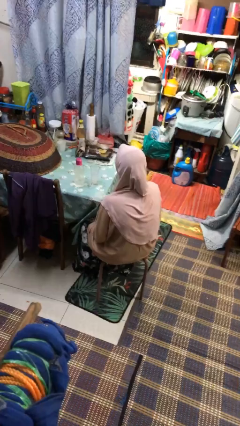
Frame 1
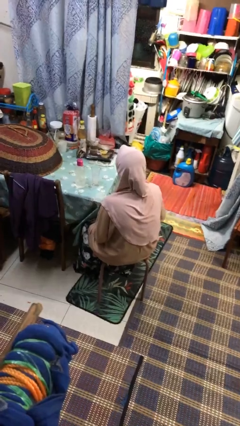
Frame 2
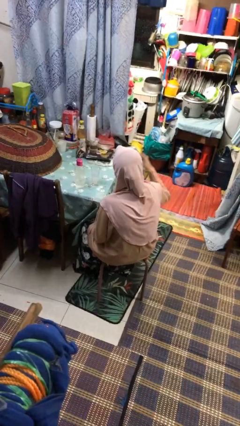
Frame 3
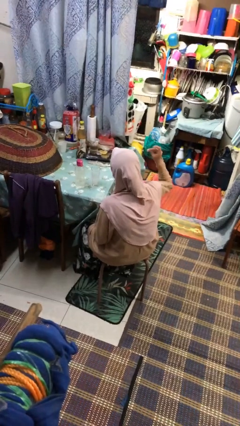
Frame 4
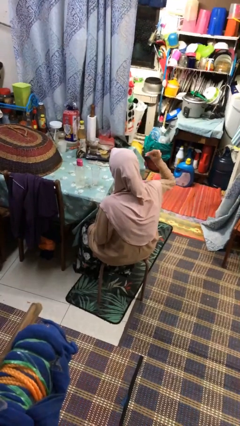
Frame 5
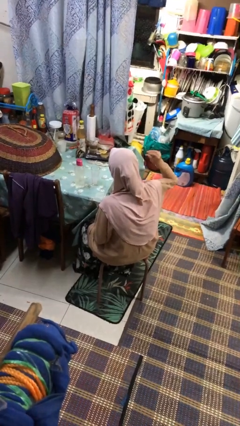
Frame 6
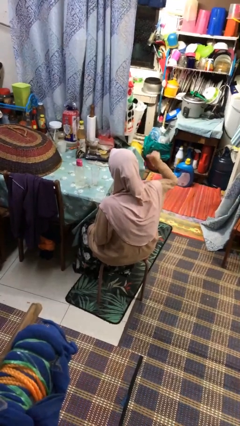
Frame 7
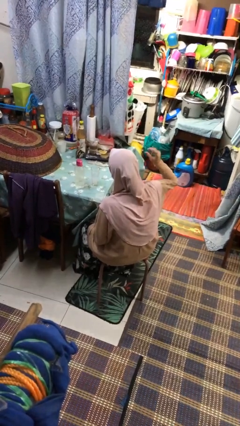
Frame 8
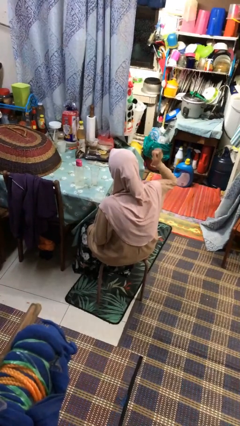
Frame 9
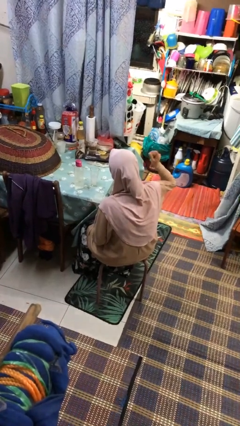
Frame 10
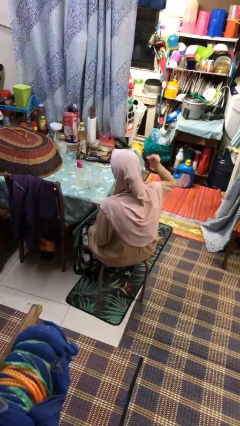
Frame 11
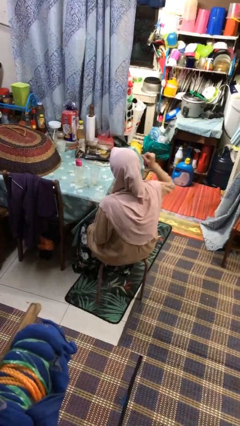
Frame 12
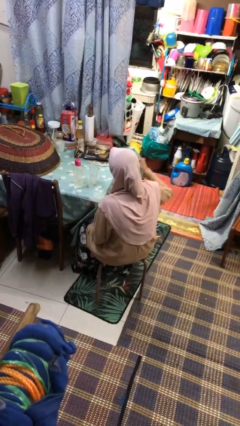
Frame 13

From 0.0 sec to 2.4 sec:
person snaps fingers

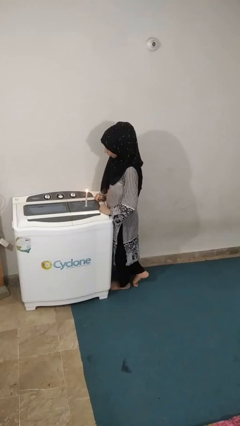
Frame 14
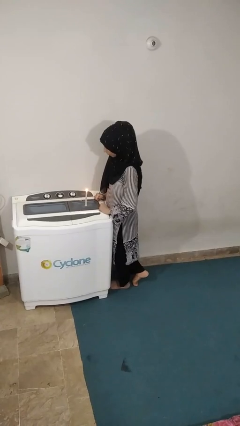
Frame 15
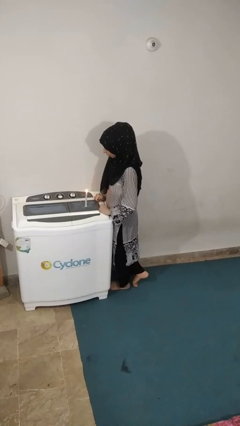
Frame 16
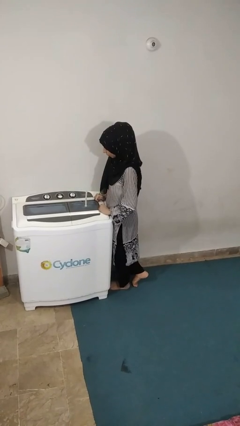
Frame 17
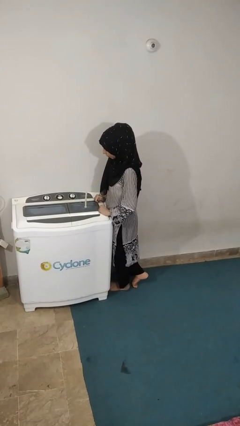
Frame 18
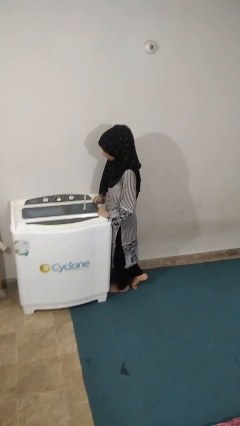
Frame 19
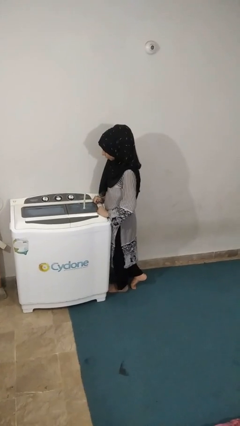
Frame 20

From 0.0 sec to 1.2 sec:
person extinguishes candle

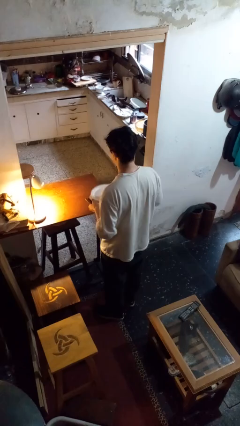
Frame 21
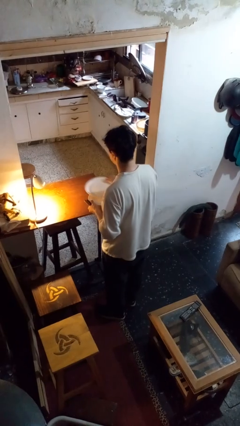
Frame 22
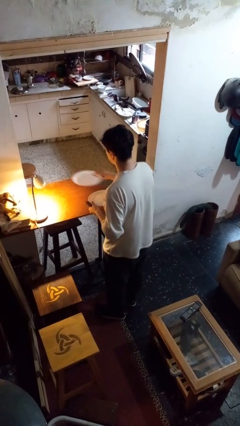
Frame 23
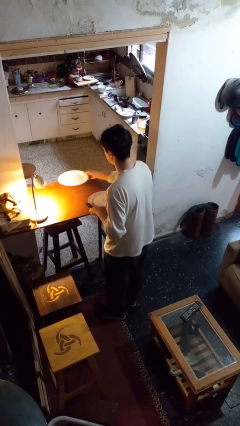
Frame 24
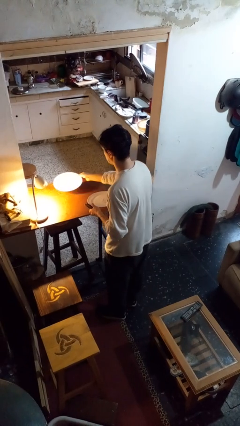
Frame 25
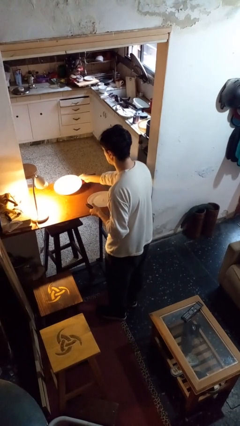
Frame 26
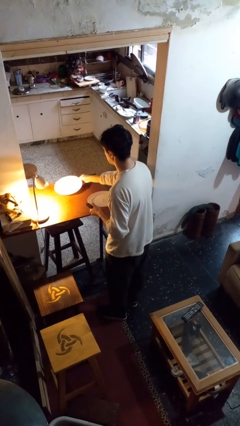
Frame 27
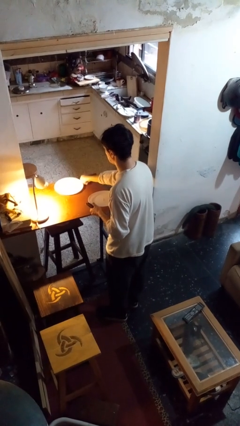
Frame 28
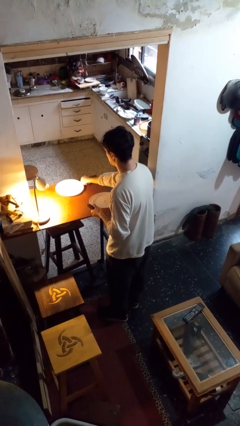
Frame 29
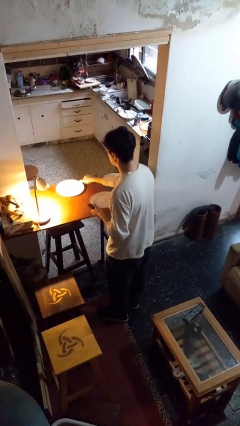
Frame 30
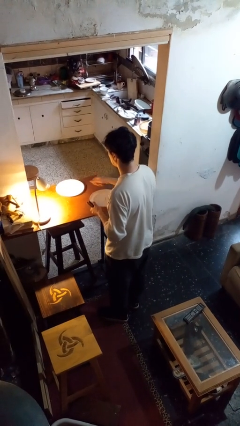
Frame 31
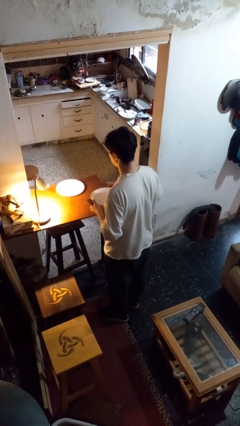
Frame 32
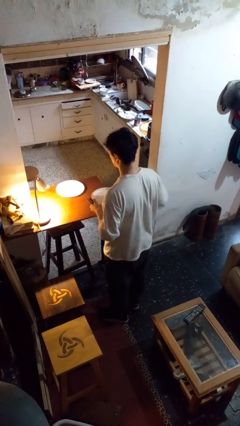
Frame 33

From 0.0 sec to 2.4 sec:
person sets table

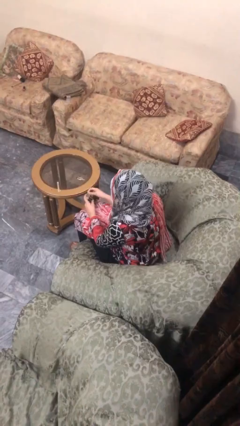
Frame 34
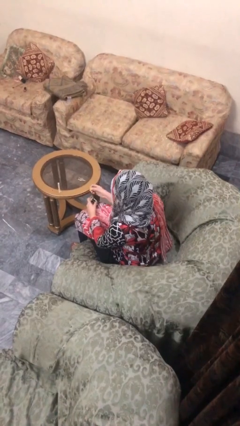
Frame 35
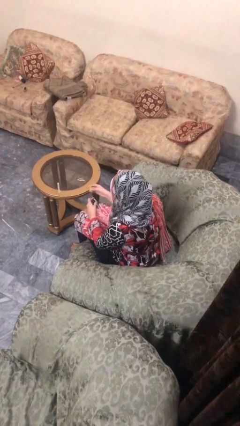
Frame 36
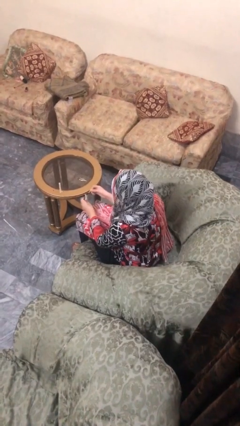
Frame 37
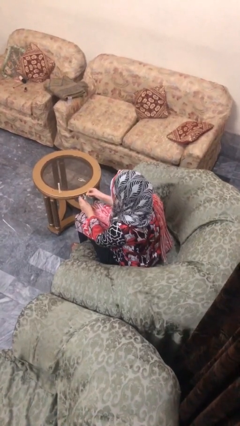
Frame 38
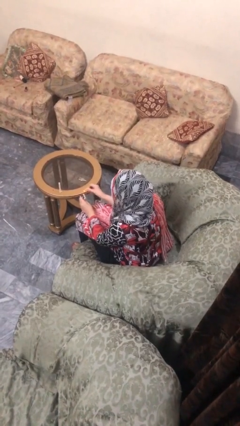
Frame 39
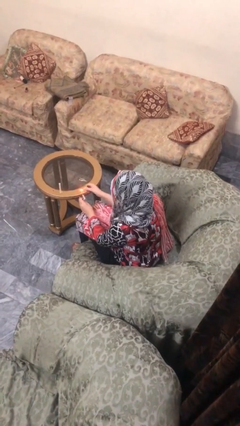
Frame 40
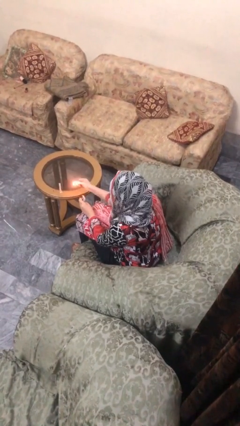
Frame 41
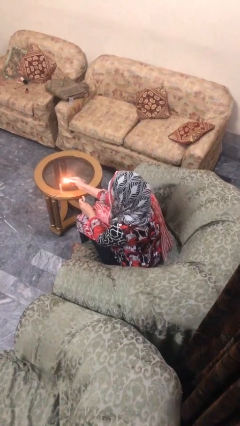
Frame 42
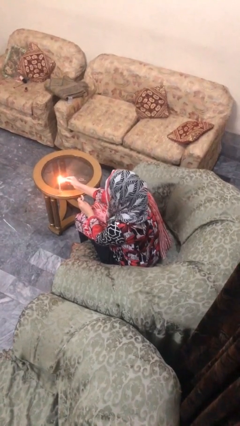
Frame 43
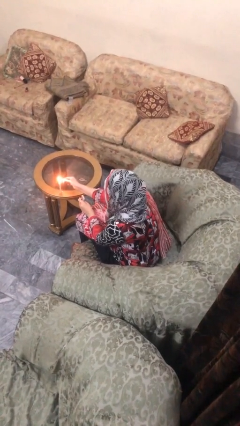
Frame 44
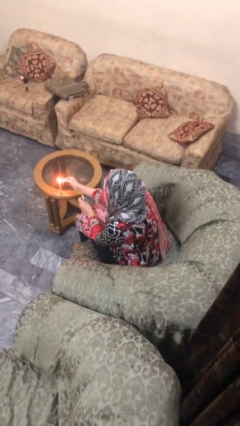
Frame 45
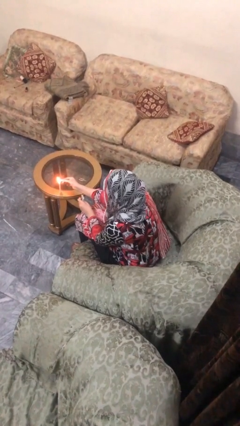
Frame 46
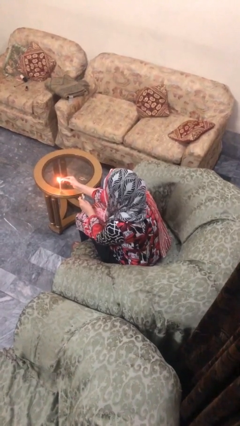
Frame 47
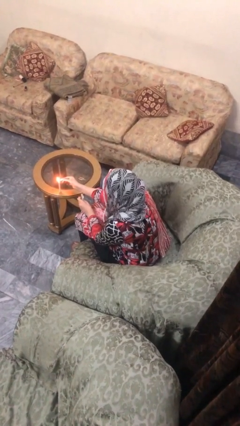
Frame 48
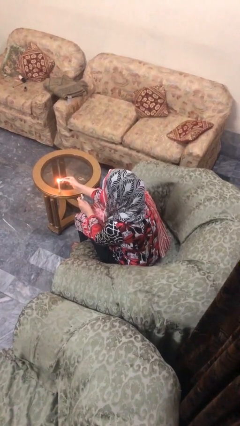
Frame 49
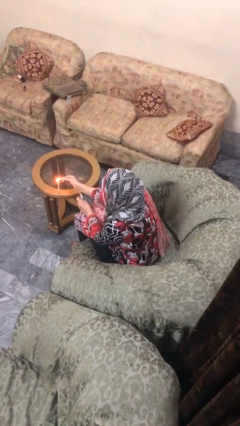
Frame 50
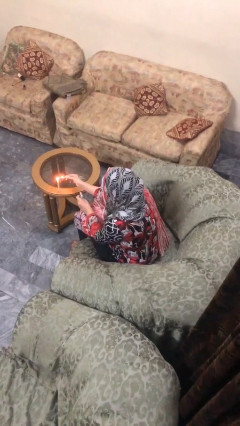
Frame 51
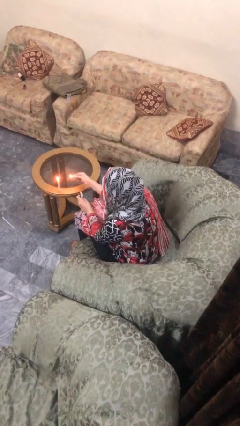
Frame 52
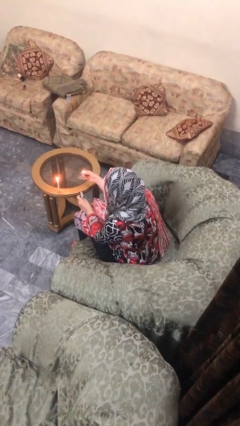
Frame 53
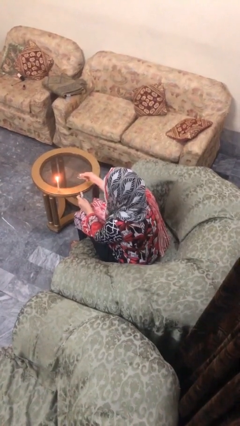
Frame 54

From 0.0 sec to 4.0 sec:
person lights candle

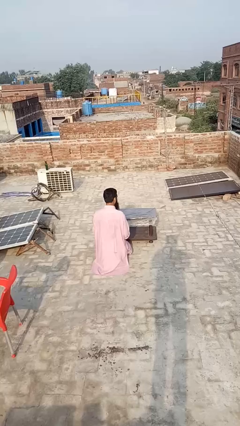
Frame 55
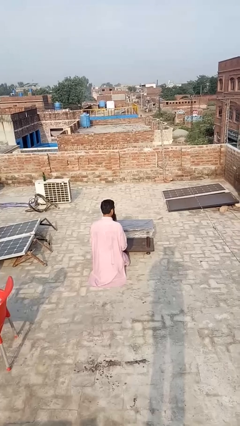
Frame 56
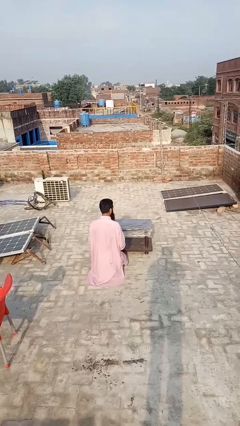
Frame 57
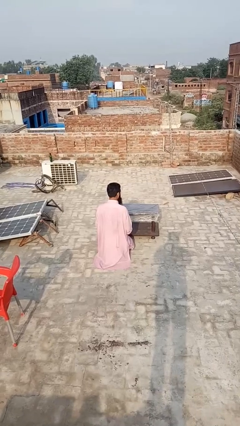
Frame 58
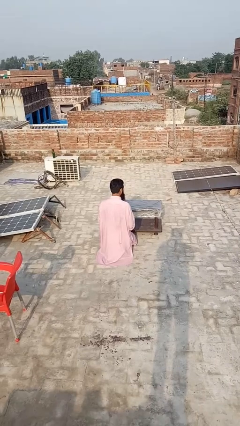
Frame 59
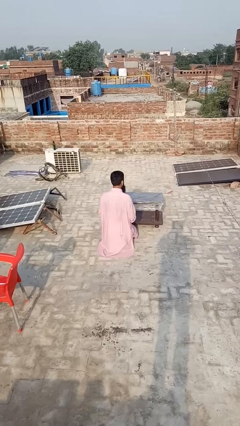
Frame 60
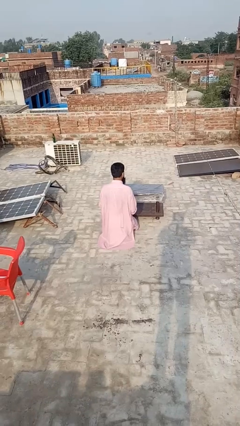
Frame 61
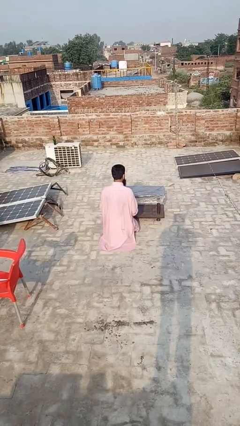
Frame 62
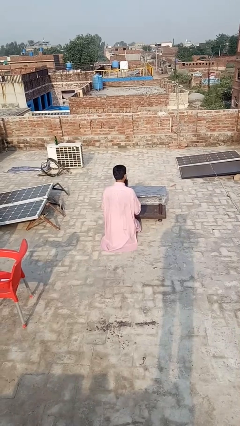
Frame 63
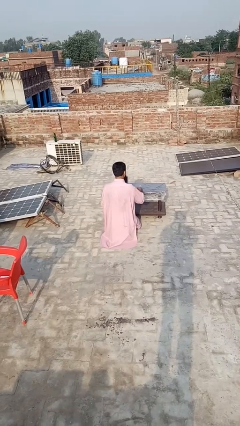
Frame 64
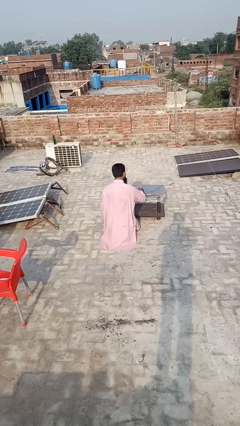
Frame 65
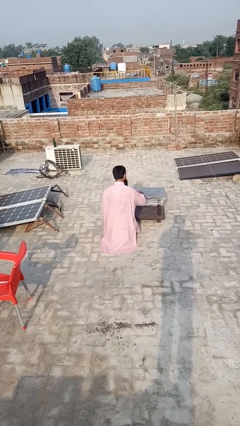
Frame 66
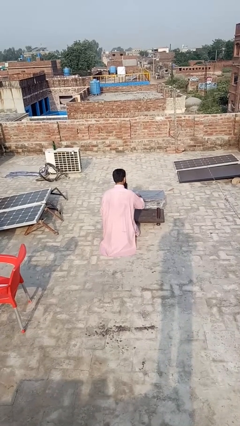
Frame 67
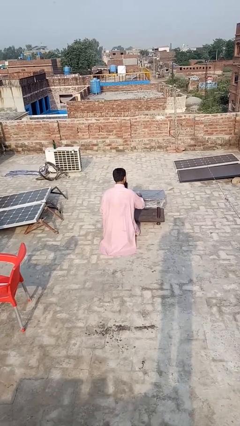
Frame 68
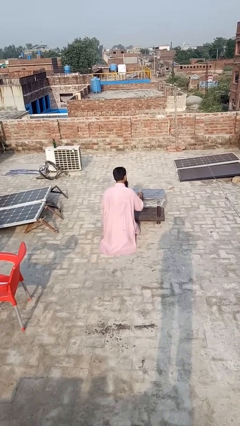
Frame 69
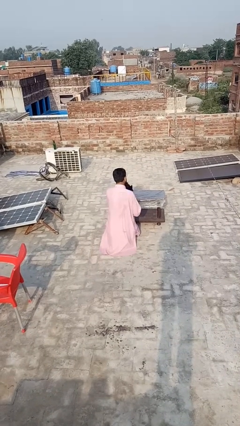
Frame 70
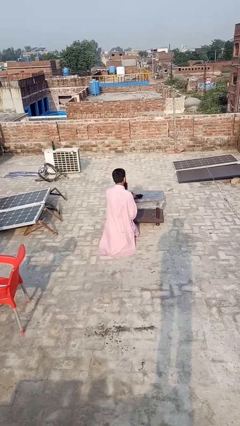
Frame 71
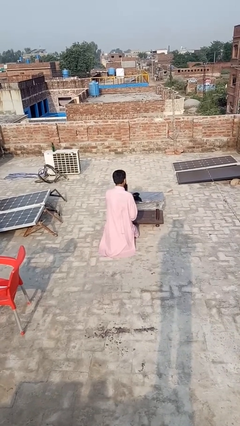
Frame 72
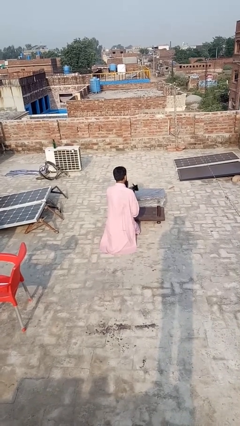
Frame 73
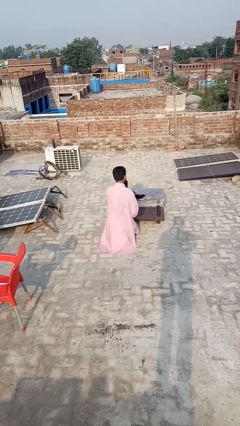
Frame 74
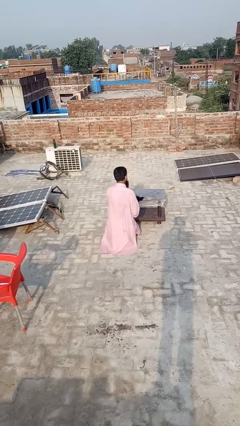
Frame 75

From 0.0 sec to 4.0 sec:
person sprays from bottle

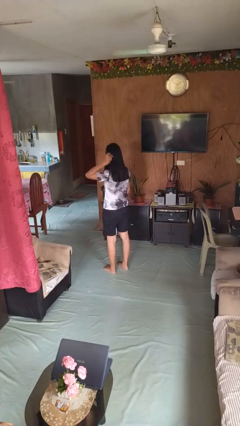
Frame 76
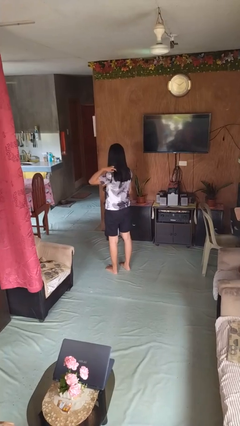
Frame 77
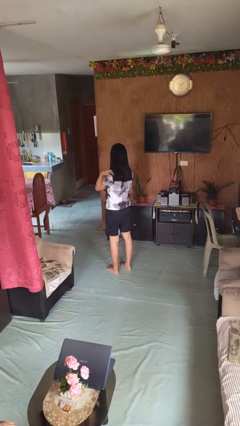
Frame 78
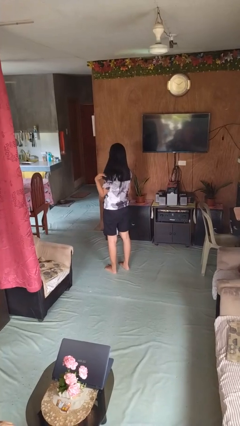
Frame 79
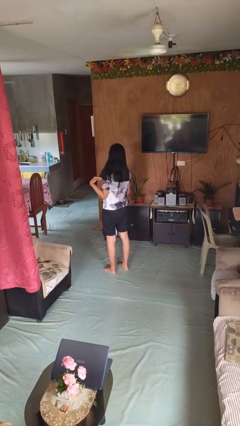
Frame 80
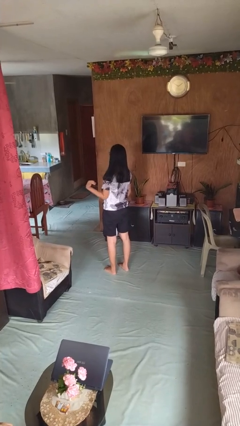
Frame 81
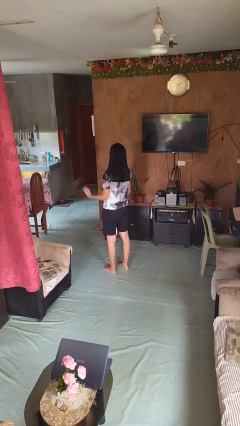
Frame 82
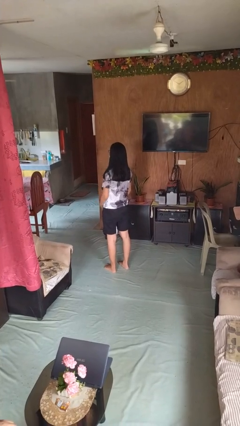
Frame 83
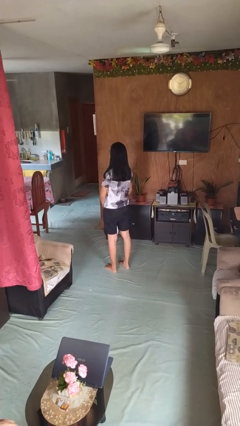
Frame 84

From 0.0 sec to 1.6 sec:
person strokes hair

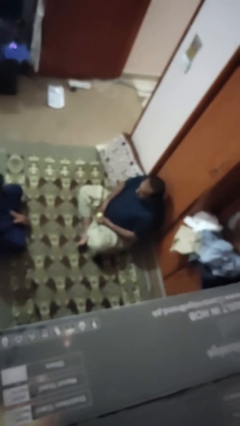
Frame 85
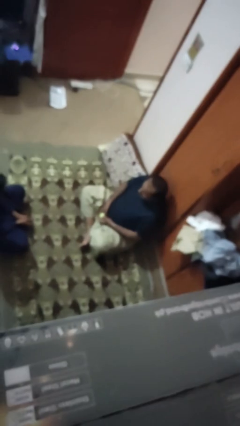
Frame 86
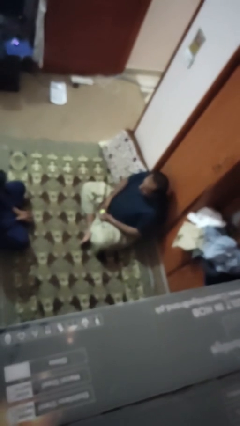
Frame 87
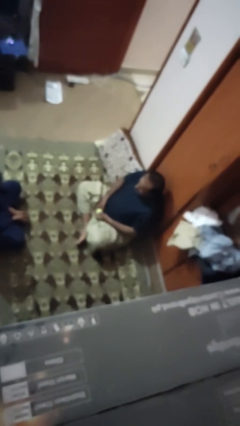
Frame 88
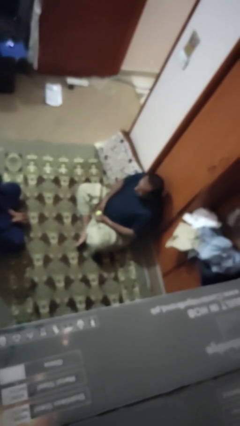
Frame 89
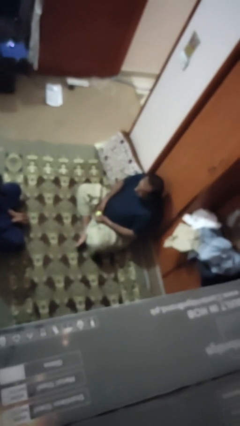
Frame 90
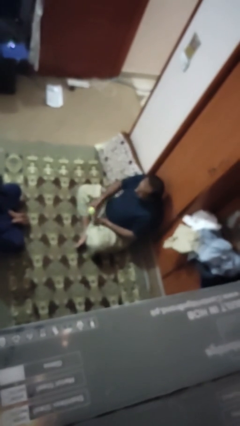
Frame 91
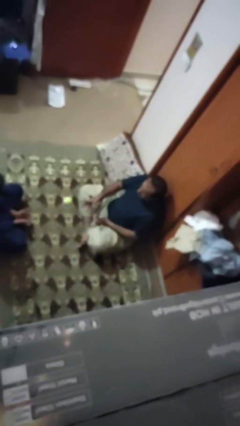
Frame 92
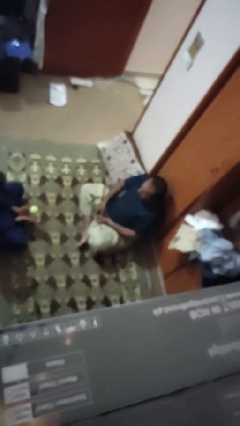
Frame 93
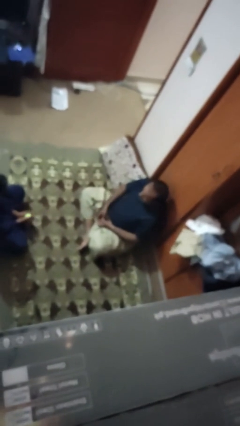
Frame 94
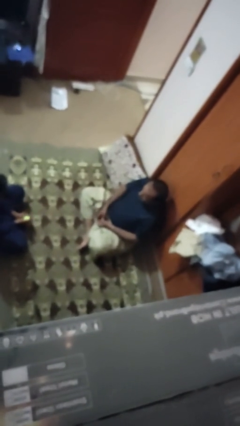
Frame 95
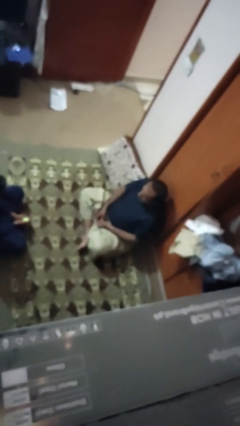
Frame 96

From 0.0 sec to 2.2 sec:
person throws object to person
